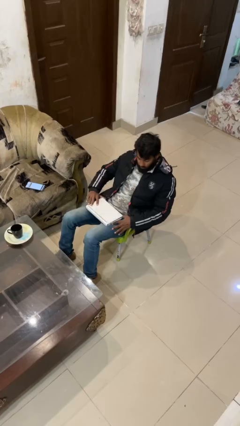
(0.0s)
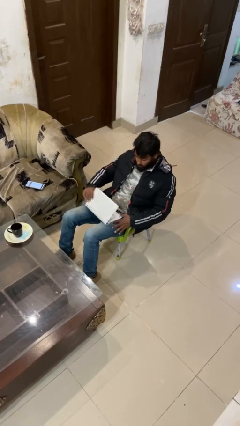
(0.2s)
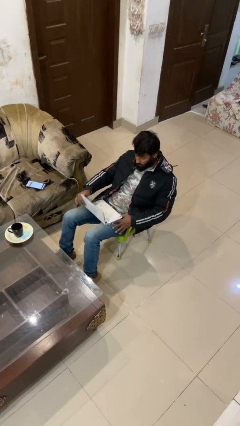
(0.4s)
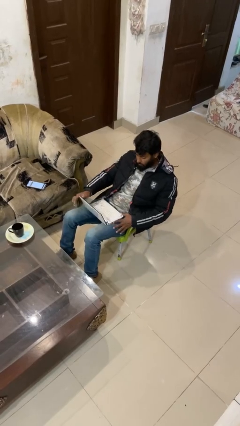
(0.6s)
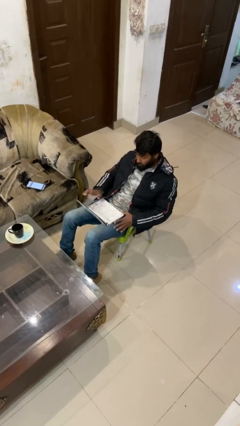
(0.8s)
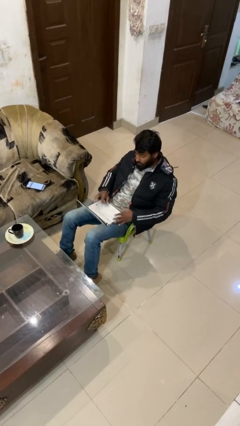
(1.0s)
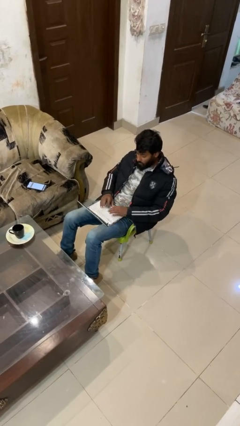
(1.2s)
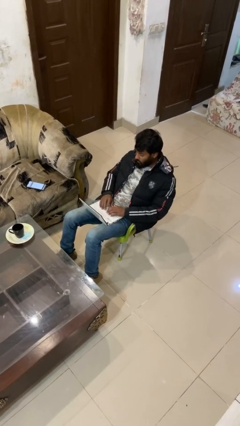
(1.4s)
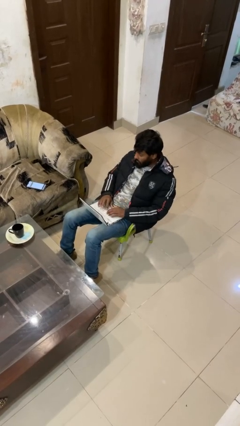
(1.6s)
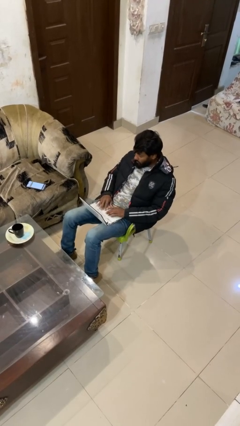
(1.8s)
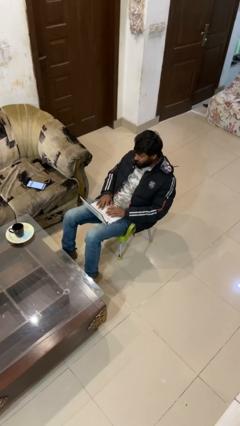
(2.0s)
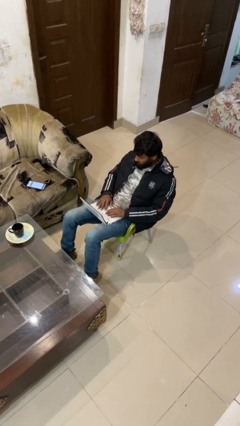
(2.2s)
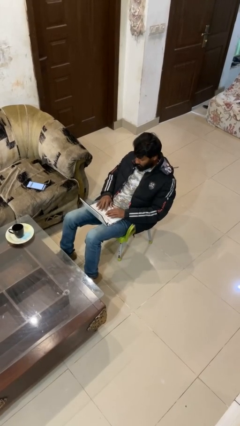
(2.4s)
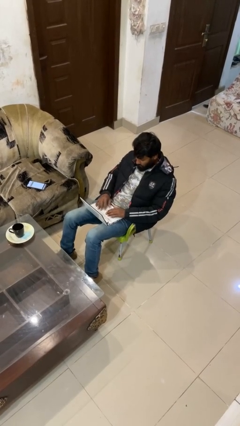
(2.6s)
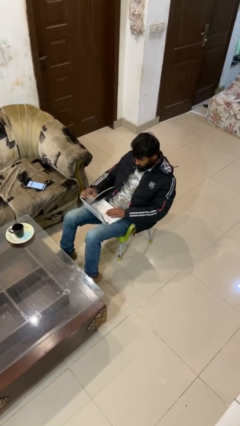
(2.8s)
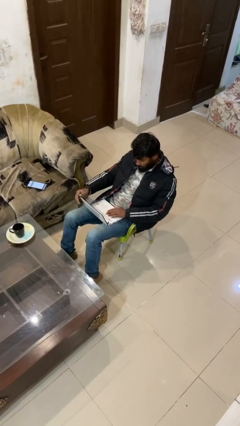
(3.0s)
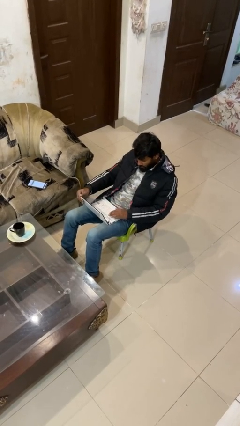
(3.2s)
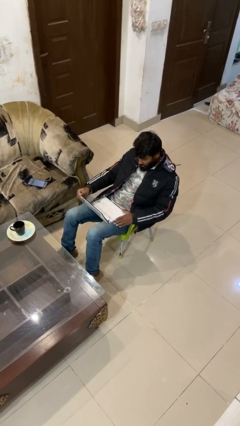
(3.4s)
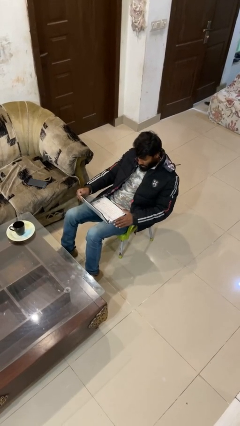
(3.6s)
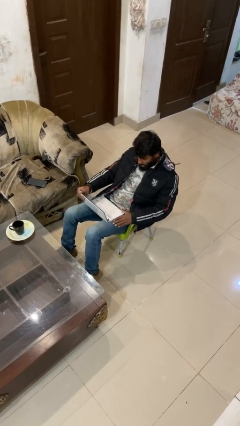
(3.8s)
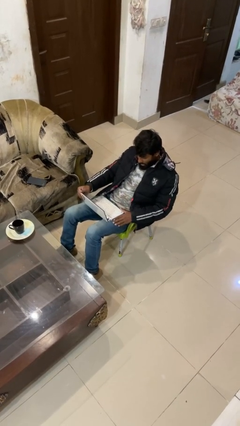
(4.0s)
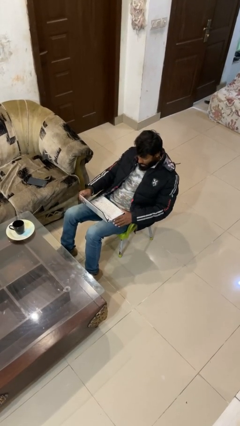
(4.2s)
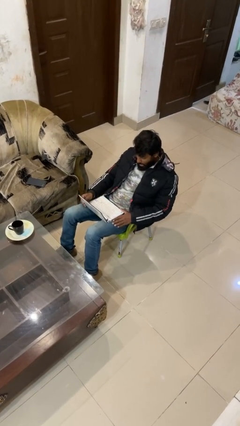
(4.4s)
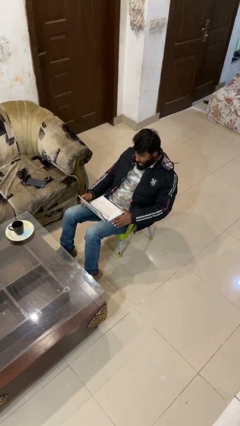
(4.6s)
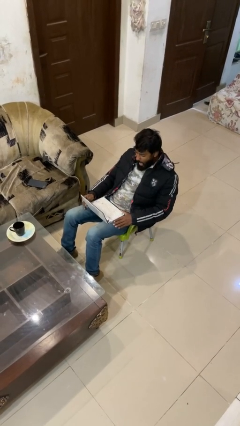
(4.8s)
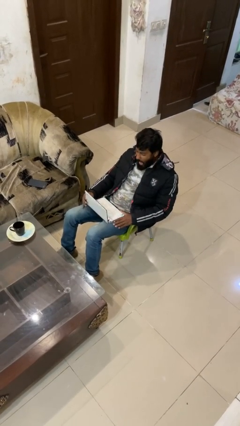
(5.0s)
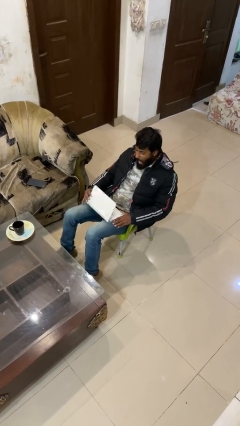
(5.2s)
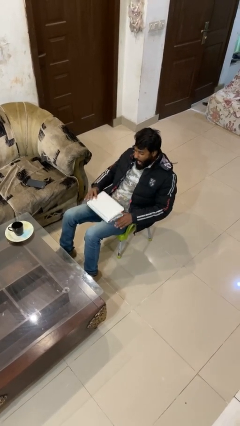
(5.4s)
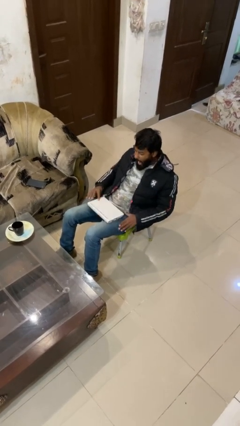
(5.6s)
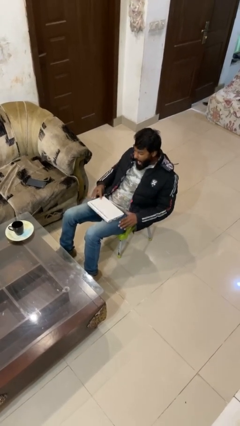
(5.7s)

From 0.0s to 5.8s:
person interacts with laptop

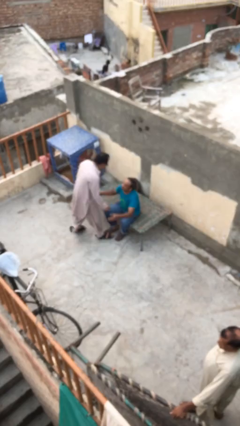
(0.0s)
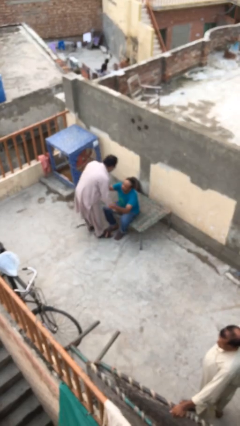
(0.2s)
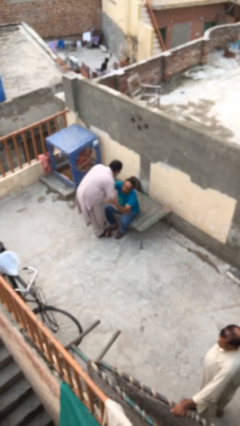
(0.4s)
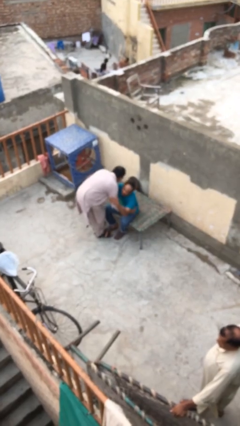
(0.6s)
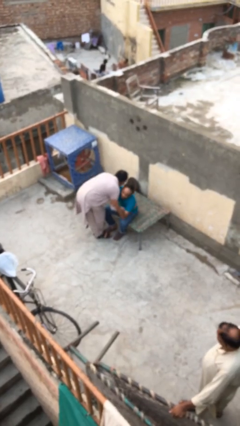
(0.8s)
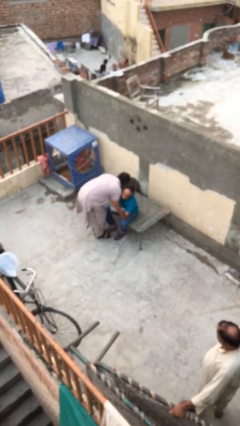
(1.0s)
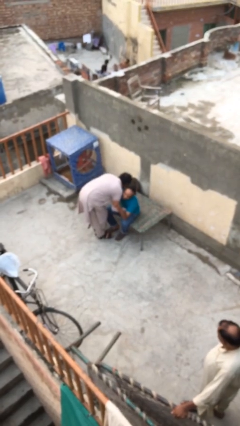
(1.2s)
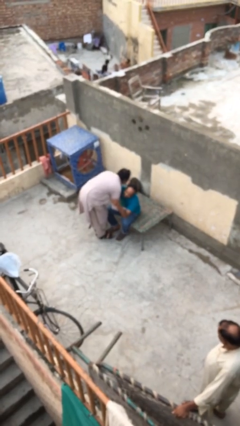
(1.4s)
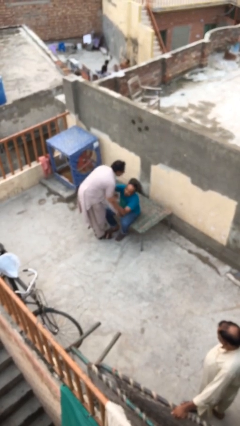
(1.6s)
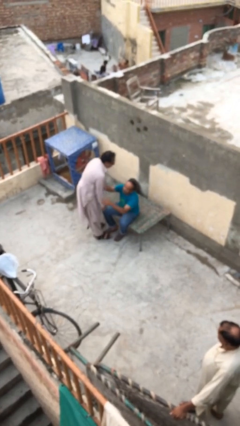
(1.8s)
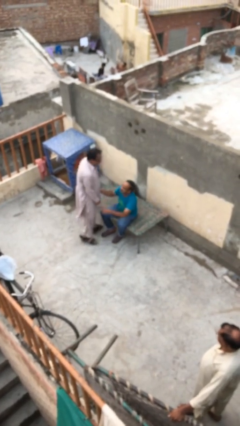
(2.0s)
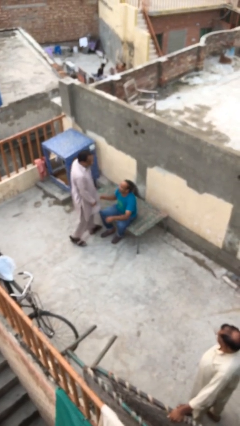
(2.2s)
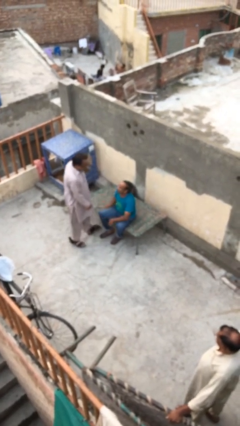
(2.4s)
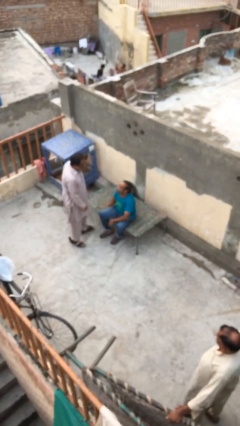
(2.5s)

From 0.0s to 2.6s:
person embraces person

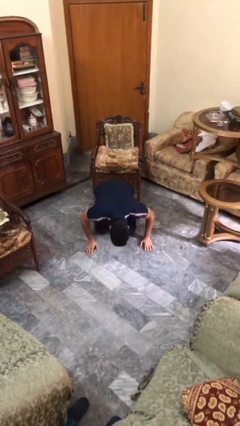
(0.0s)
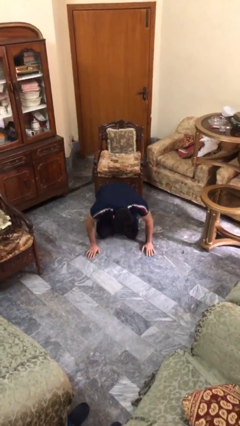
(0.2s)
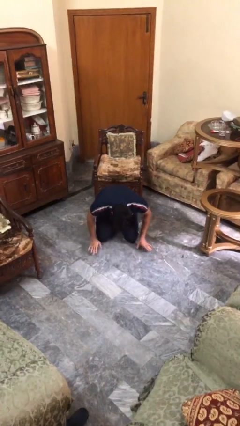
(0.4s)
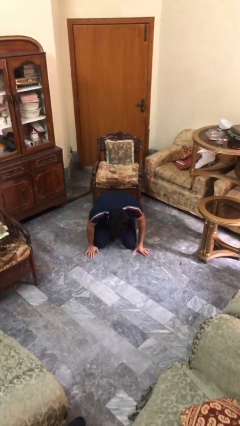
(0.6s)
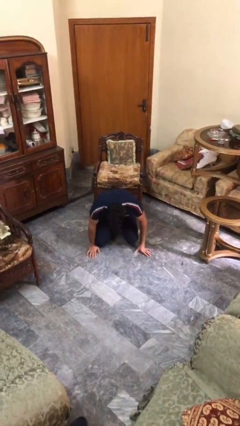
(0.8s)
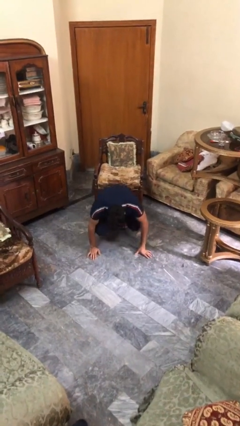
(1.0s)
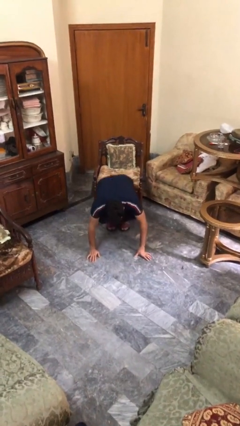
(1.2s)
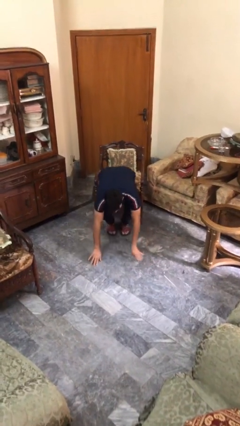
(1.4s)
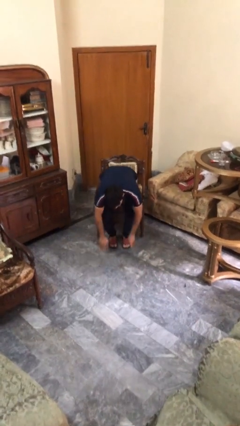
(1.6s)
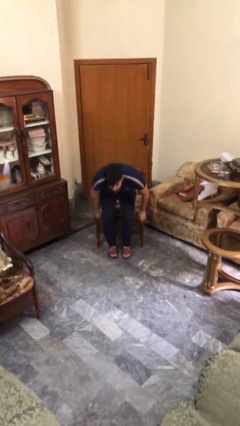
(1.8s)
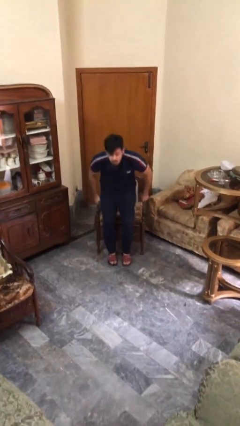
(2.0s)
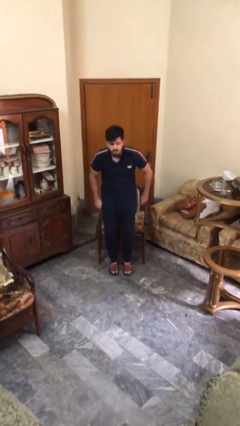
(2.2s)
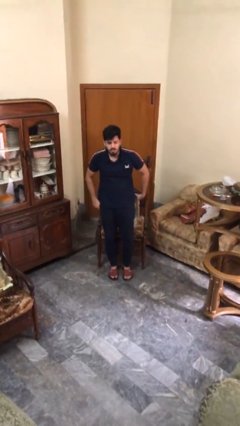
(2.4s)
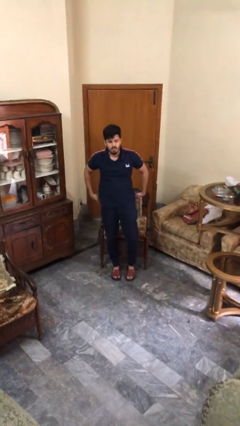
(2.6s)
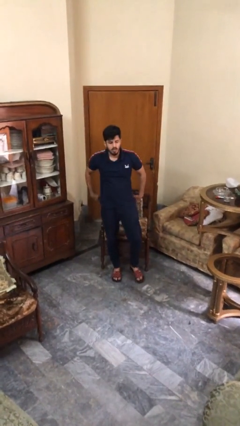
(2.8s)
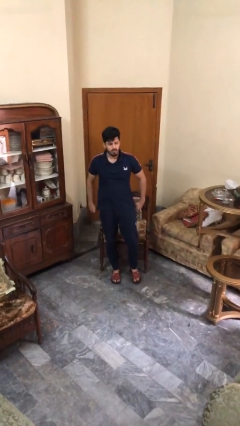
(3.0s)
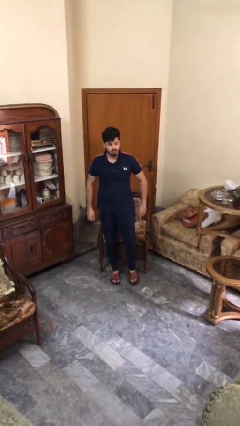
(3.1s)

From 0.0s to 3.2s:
person stands up from floor

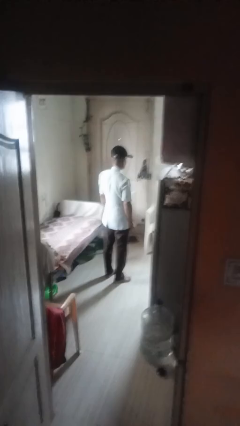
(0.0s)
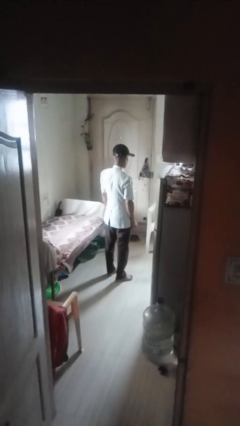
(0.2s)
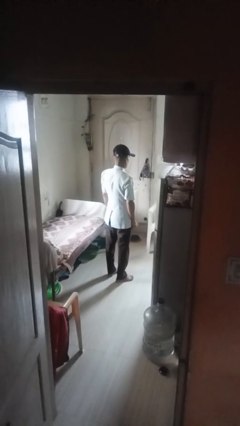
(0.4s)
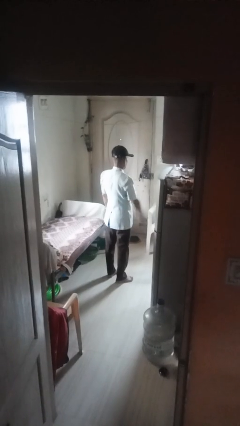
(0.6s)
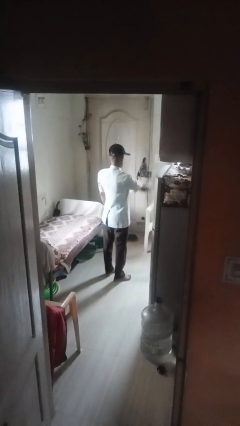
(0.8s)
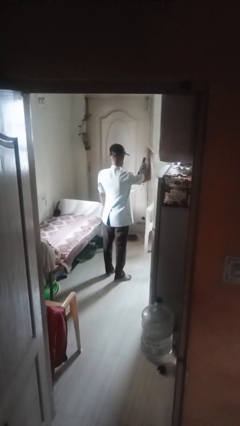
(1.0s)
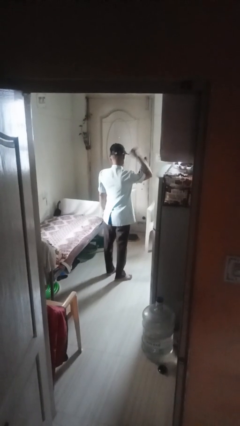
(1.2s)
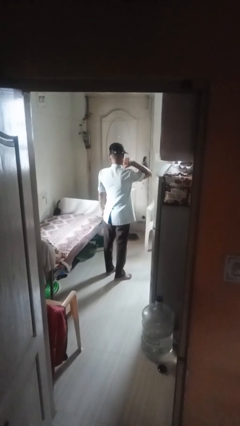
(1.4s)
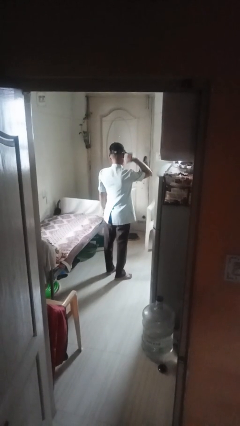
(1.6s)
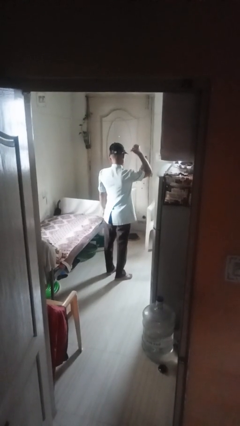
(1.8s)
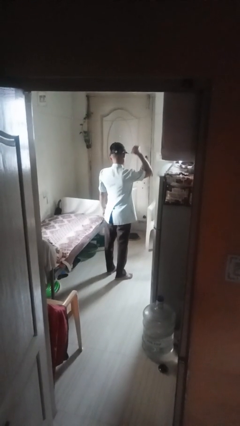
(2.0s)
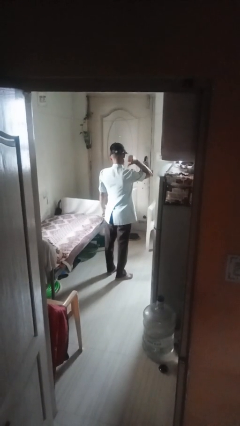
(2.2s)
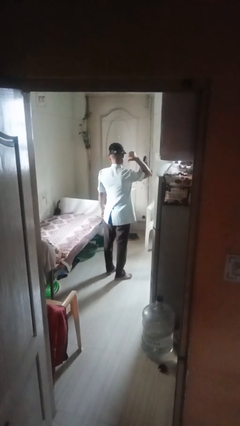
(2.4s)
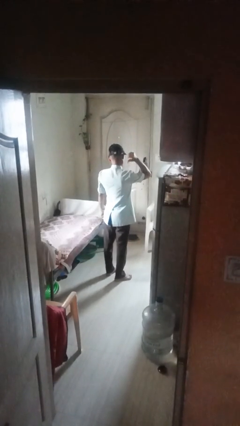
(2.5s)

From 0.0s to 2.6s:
person gestures behind me

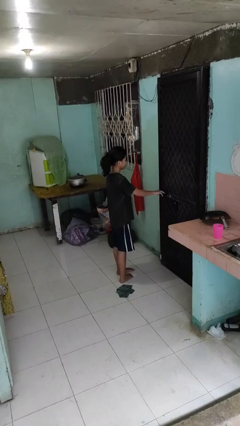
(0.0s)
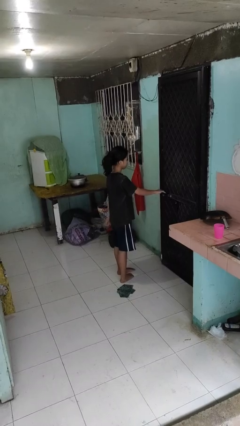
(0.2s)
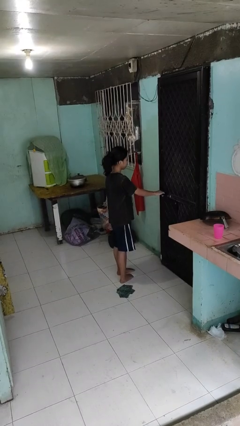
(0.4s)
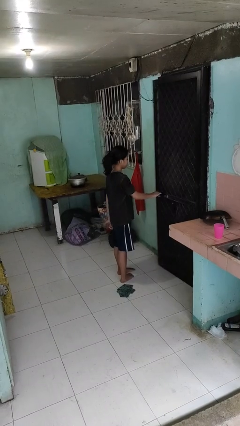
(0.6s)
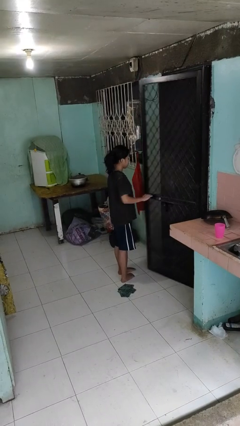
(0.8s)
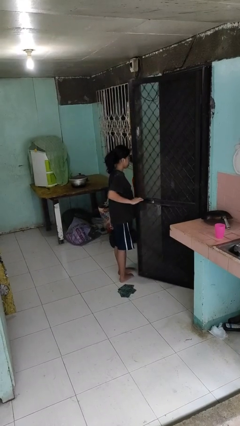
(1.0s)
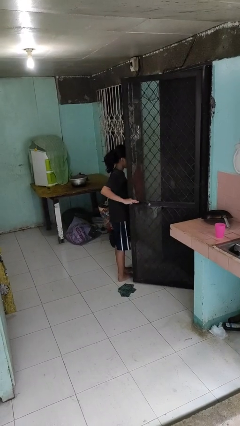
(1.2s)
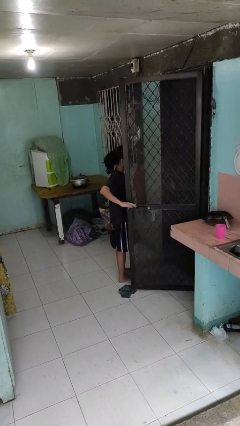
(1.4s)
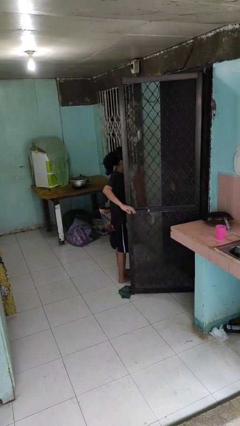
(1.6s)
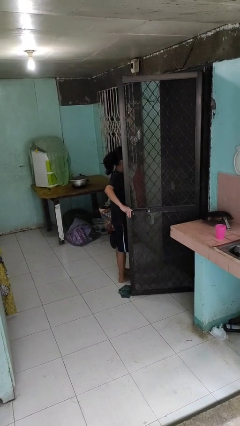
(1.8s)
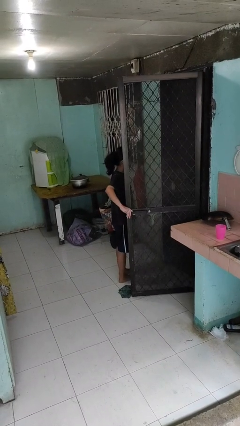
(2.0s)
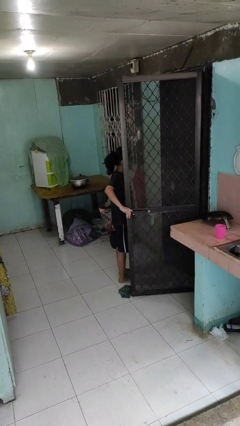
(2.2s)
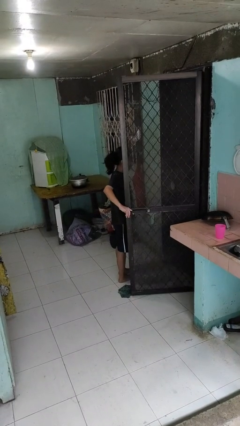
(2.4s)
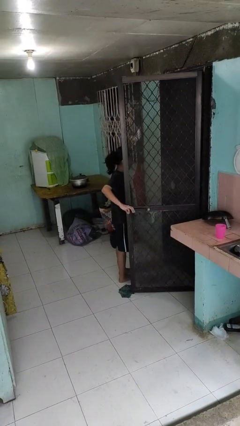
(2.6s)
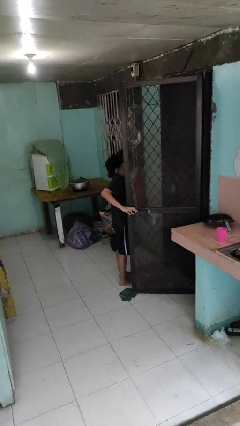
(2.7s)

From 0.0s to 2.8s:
person opens facility door

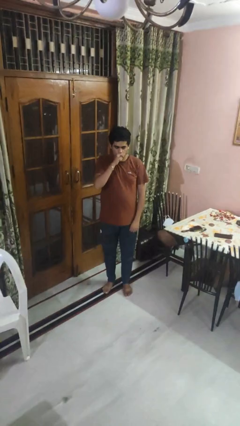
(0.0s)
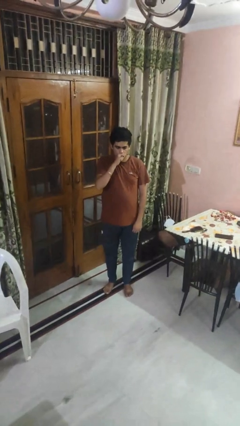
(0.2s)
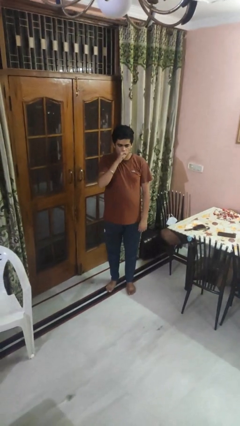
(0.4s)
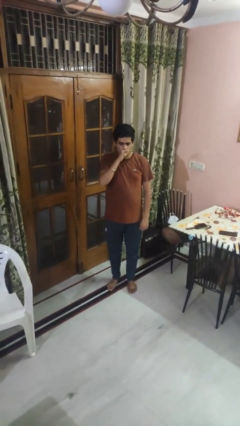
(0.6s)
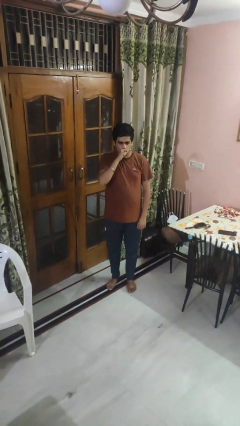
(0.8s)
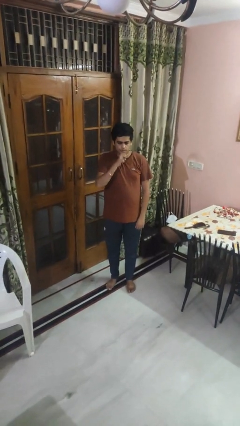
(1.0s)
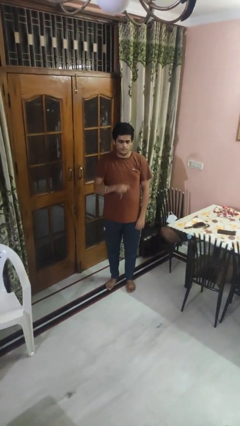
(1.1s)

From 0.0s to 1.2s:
person vapes
